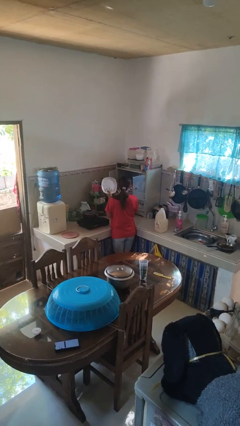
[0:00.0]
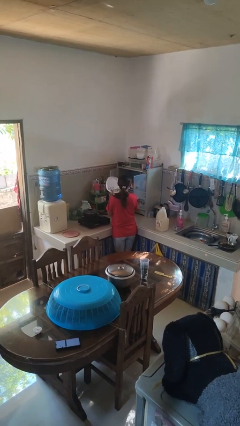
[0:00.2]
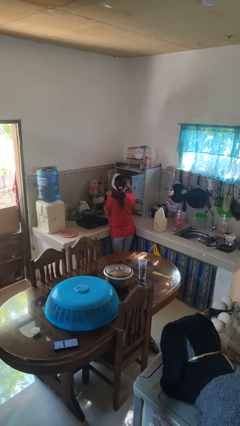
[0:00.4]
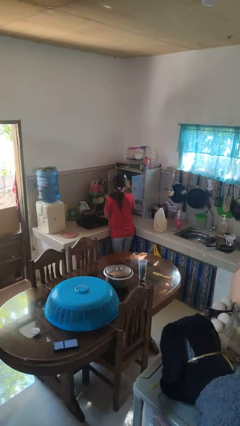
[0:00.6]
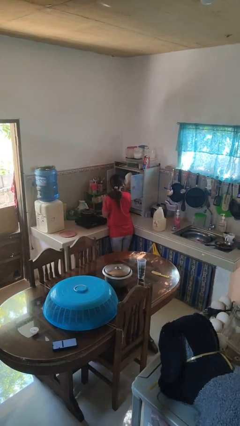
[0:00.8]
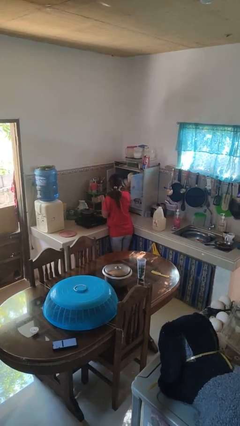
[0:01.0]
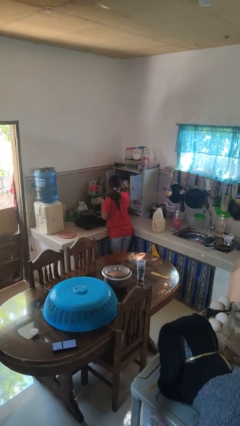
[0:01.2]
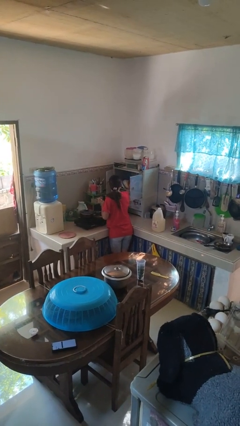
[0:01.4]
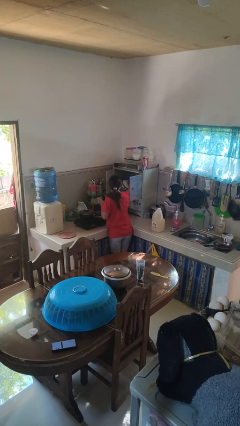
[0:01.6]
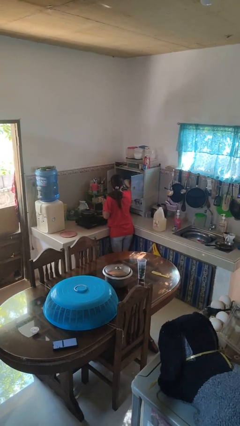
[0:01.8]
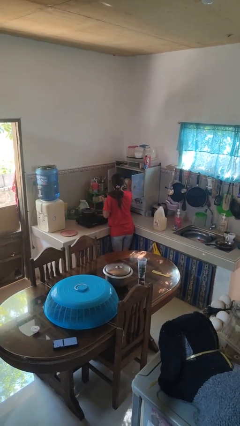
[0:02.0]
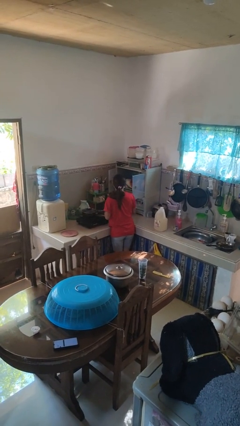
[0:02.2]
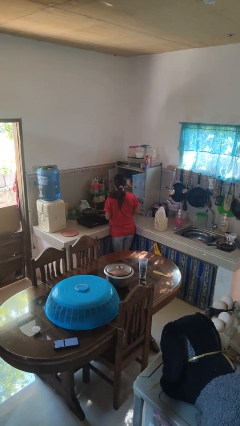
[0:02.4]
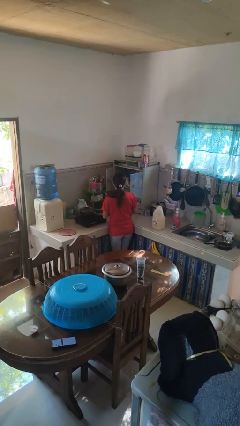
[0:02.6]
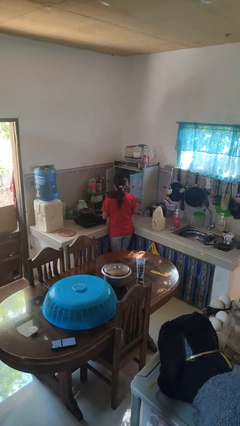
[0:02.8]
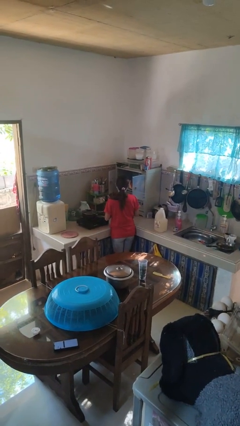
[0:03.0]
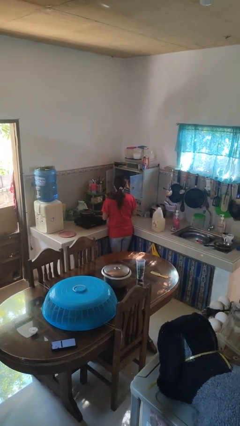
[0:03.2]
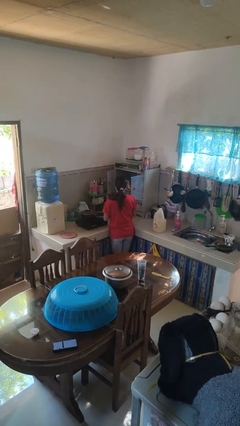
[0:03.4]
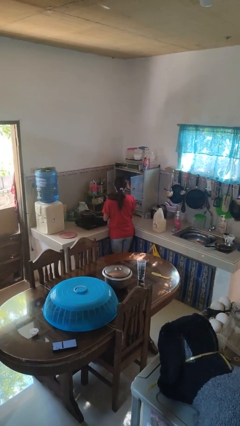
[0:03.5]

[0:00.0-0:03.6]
person puts object in cabinet

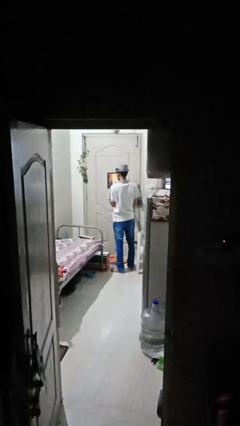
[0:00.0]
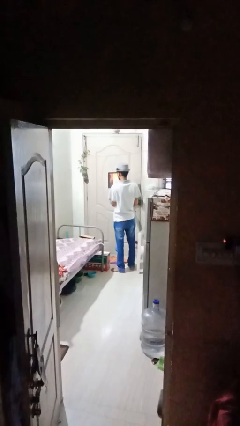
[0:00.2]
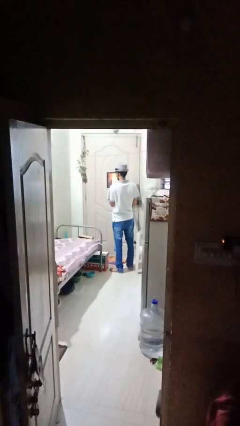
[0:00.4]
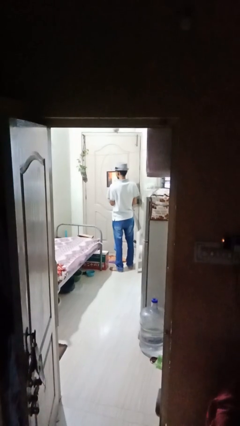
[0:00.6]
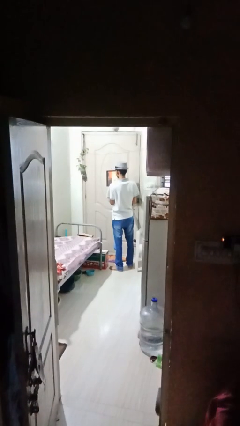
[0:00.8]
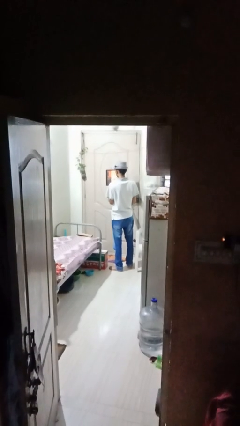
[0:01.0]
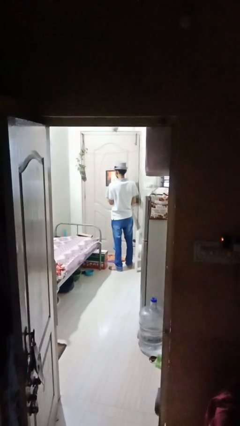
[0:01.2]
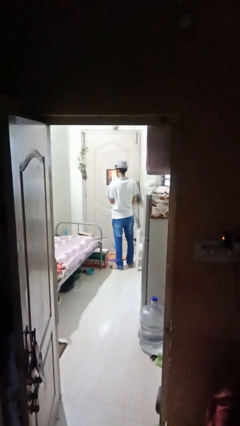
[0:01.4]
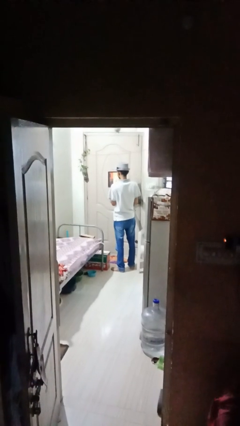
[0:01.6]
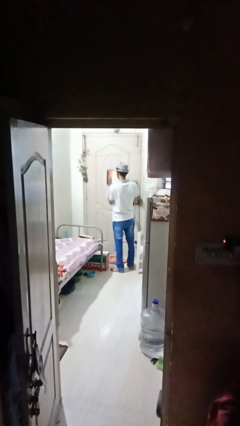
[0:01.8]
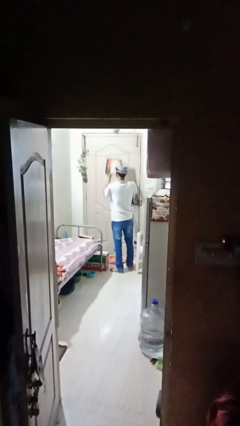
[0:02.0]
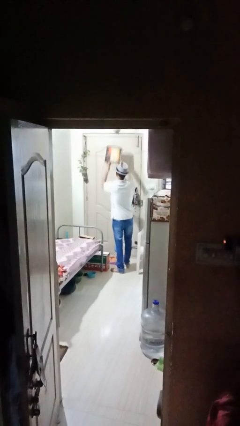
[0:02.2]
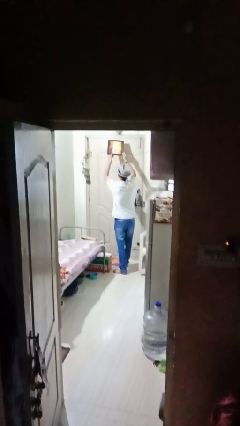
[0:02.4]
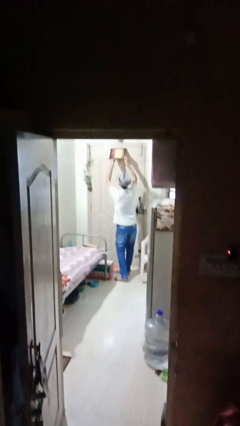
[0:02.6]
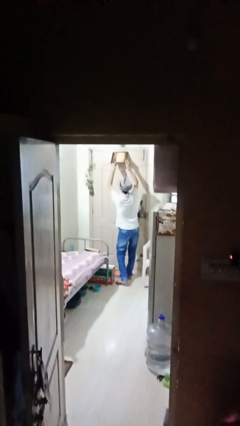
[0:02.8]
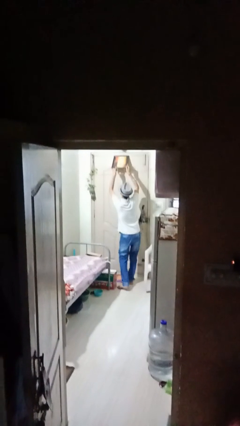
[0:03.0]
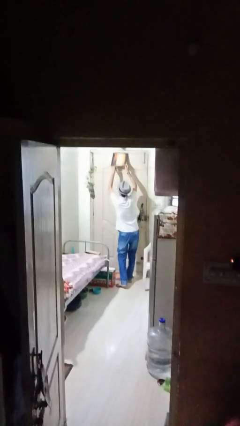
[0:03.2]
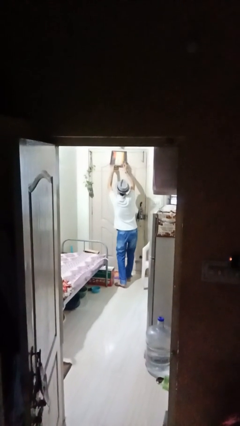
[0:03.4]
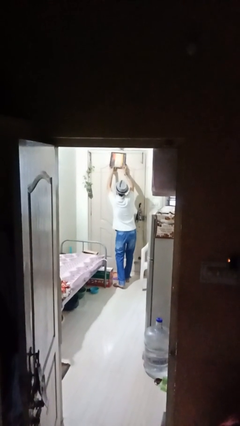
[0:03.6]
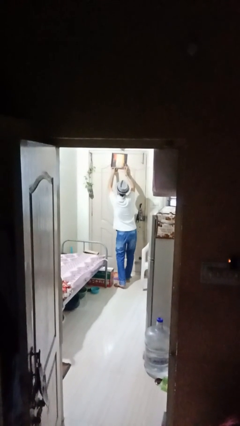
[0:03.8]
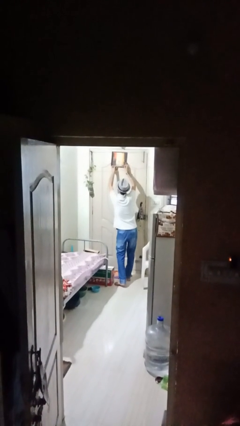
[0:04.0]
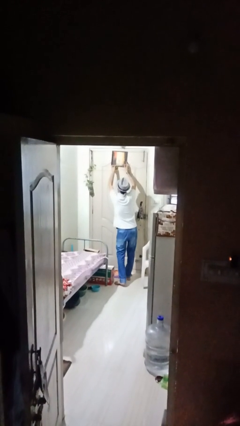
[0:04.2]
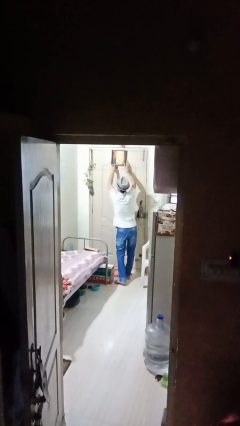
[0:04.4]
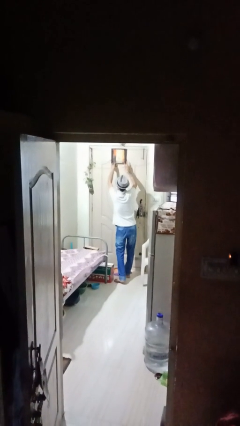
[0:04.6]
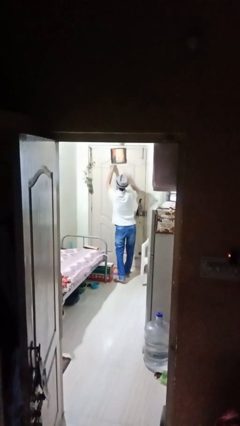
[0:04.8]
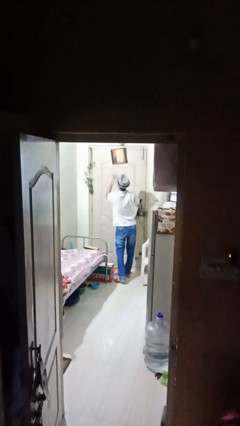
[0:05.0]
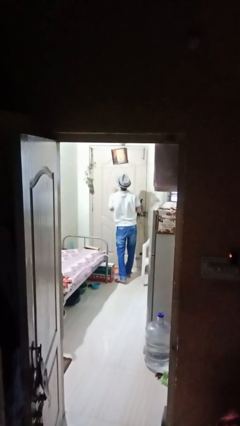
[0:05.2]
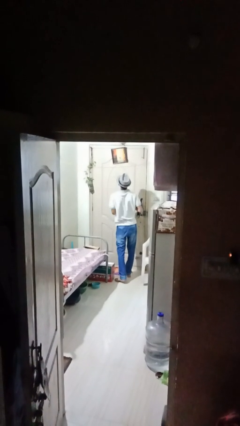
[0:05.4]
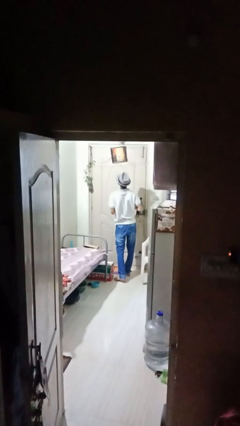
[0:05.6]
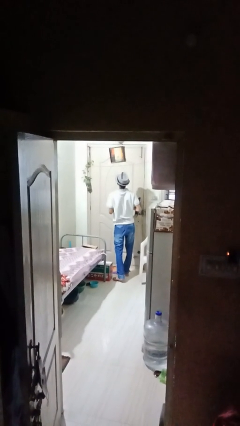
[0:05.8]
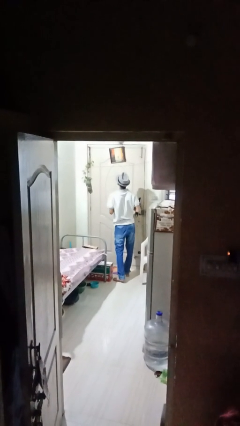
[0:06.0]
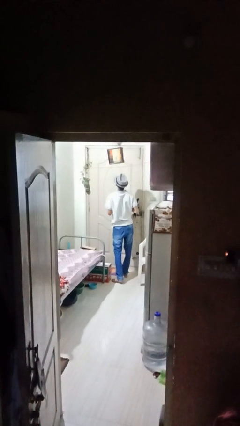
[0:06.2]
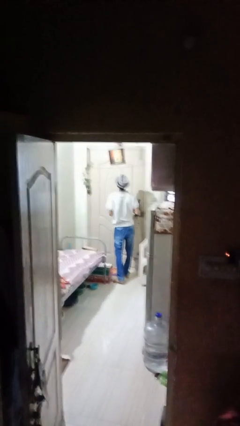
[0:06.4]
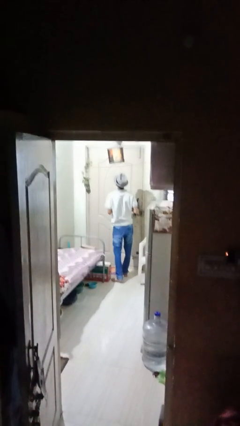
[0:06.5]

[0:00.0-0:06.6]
person puts up picture frame

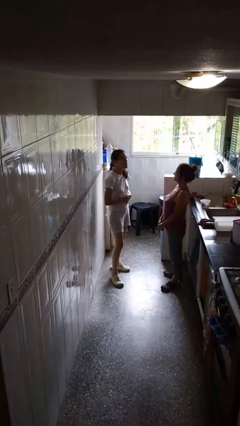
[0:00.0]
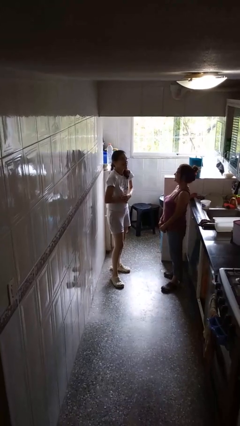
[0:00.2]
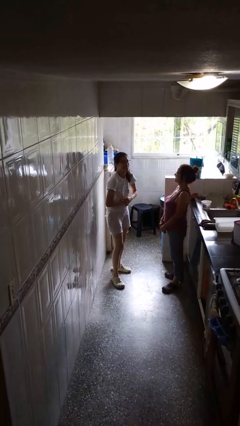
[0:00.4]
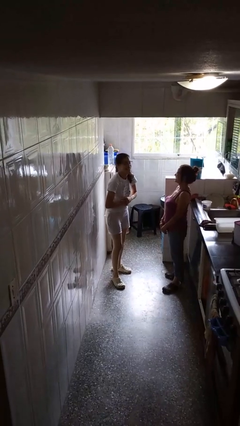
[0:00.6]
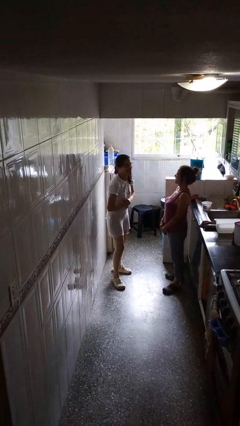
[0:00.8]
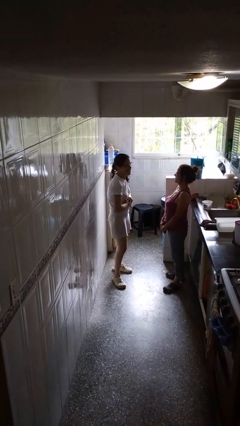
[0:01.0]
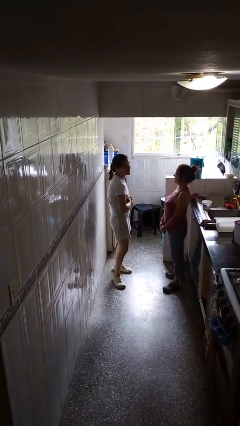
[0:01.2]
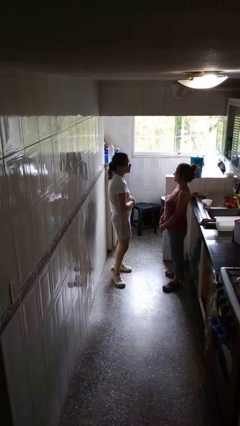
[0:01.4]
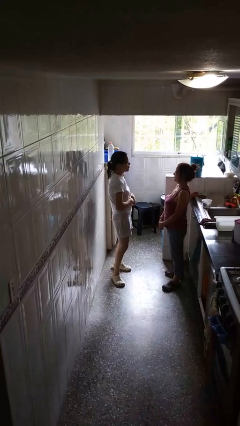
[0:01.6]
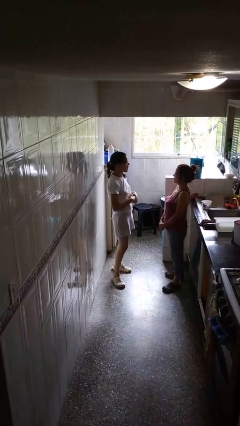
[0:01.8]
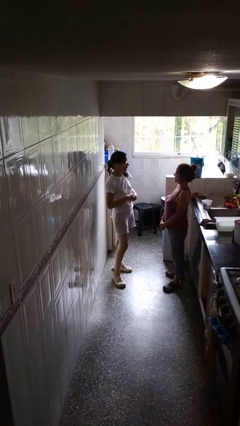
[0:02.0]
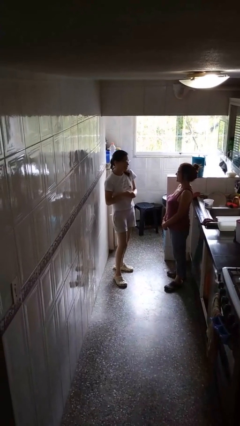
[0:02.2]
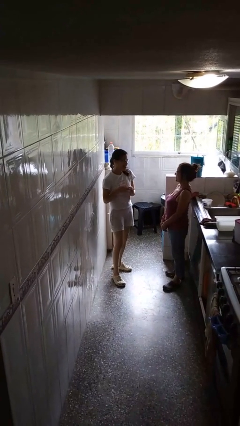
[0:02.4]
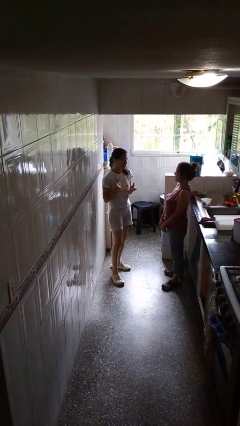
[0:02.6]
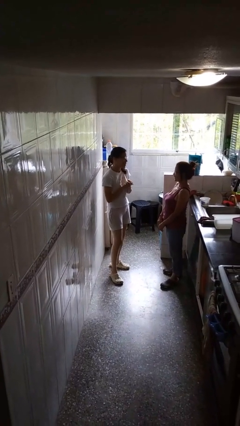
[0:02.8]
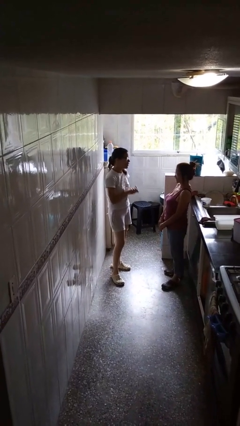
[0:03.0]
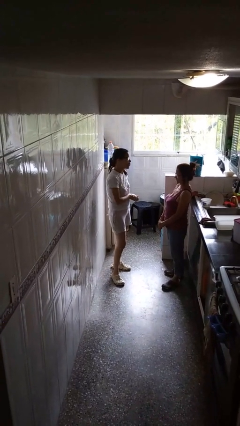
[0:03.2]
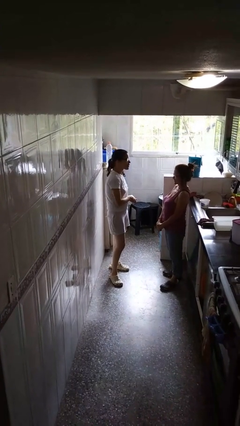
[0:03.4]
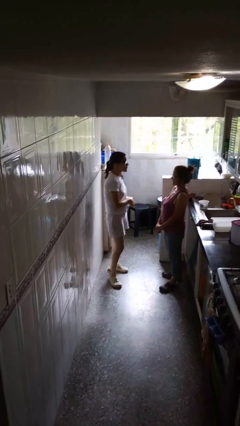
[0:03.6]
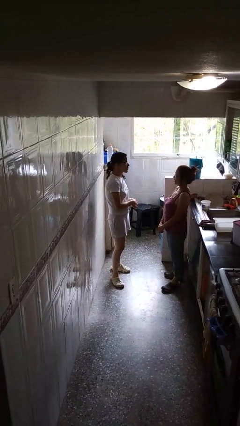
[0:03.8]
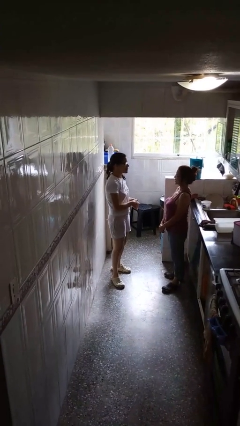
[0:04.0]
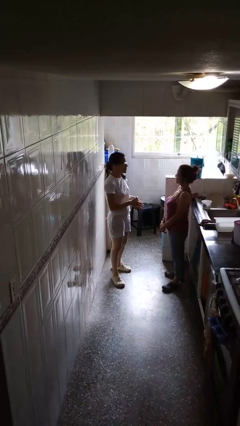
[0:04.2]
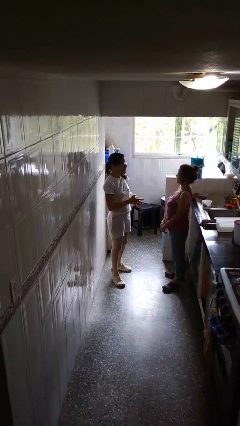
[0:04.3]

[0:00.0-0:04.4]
person laughs with person

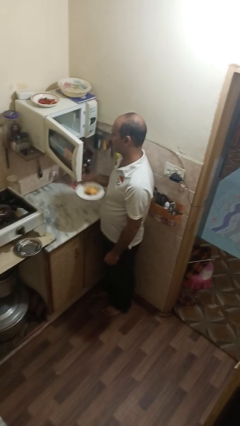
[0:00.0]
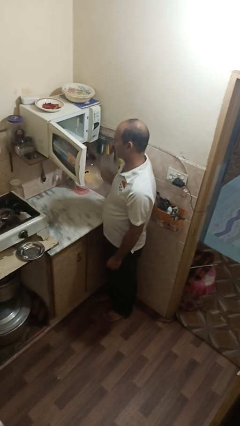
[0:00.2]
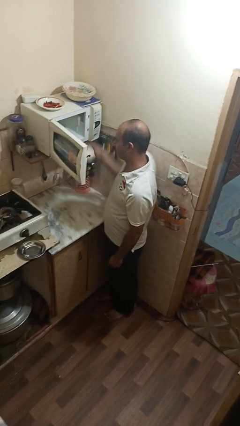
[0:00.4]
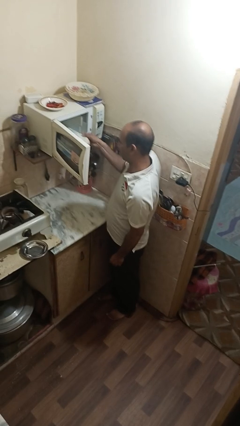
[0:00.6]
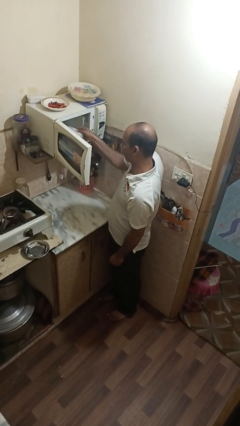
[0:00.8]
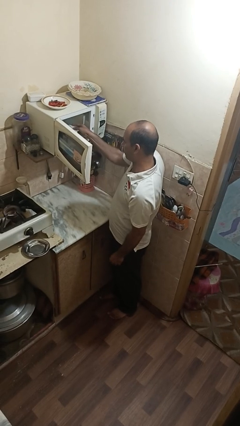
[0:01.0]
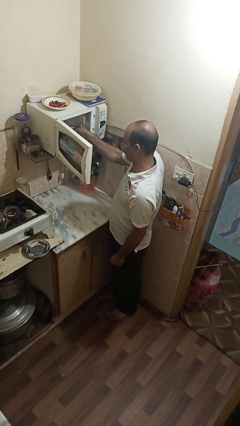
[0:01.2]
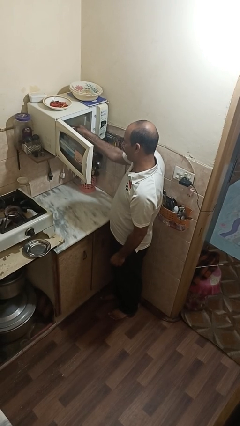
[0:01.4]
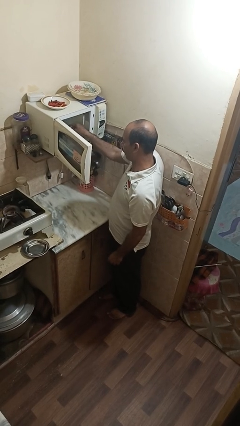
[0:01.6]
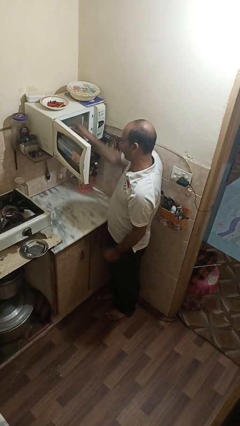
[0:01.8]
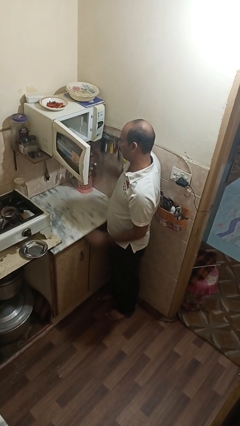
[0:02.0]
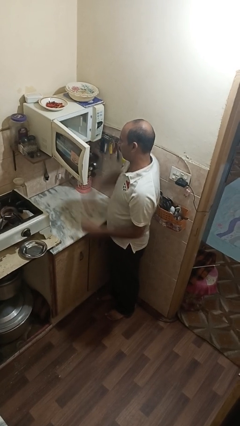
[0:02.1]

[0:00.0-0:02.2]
person puts object into microwave

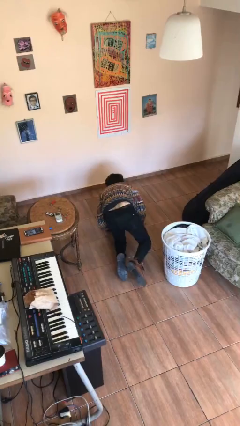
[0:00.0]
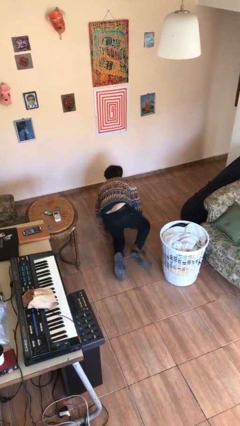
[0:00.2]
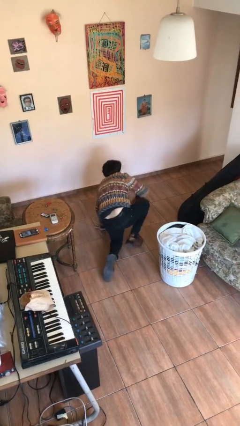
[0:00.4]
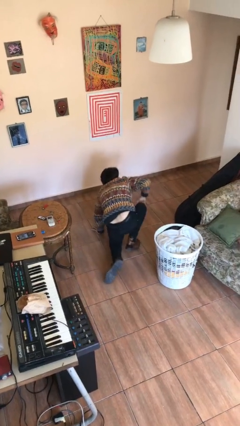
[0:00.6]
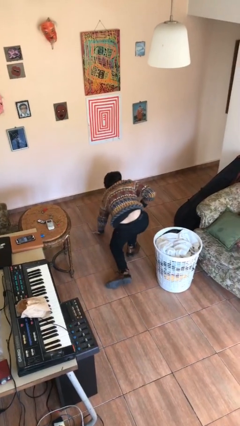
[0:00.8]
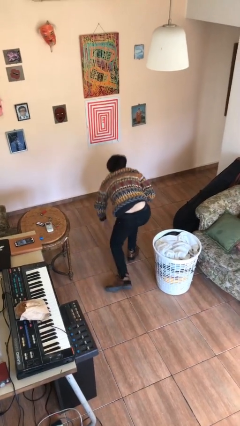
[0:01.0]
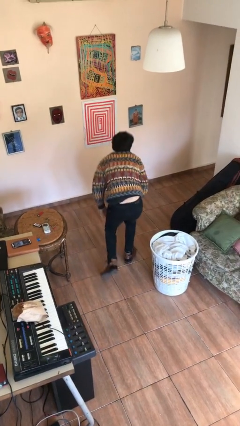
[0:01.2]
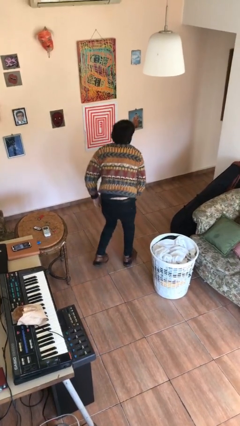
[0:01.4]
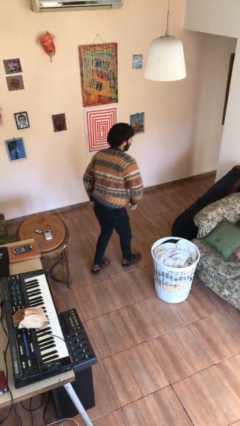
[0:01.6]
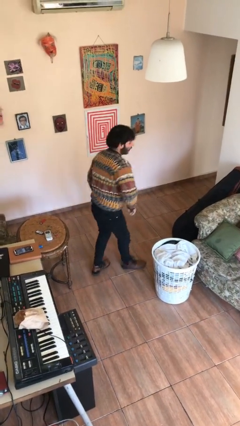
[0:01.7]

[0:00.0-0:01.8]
person stands up from floor
